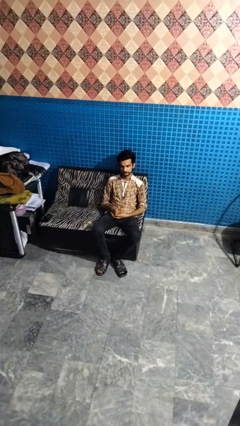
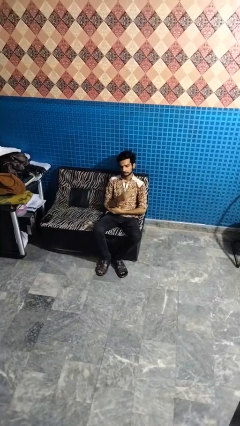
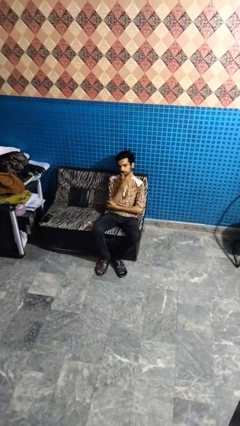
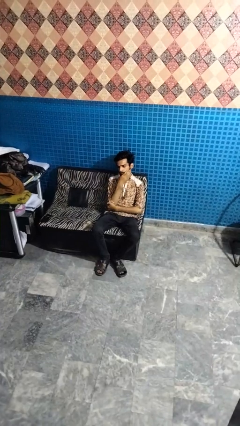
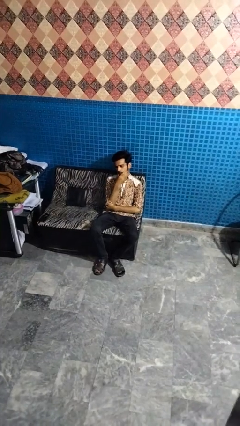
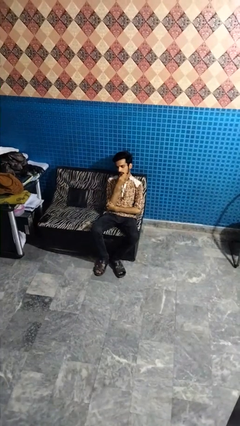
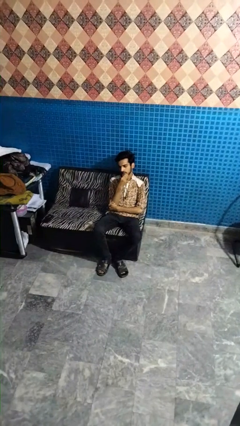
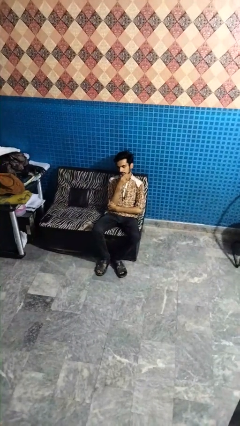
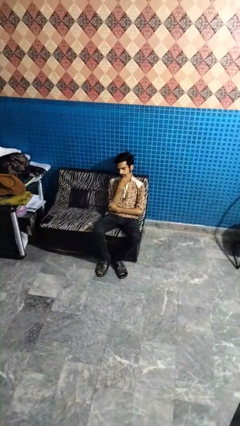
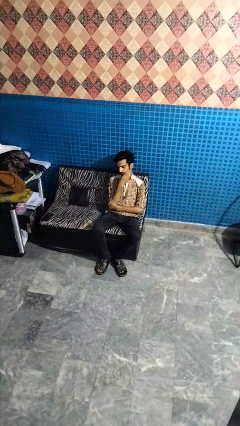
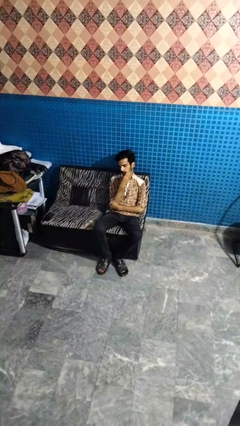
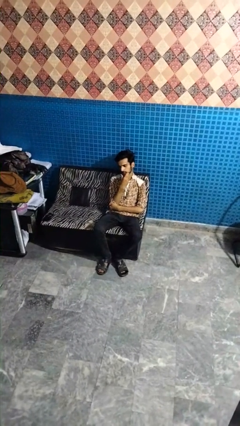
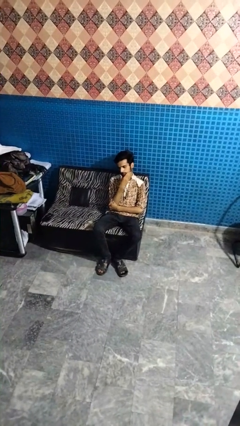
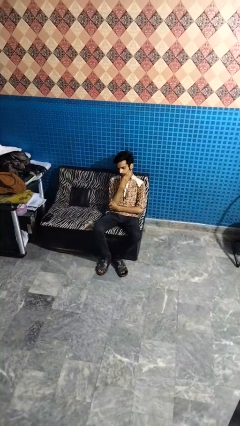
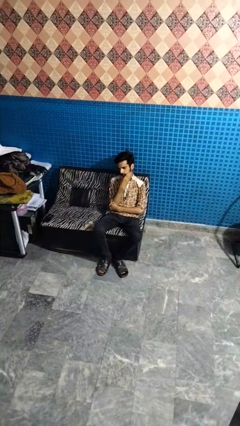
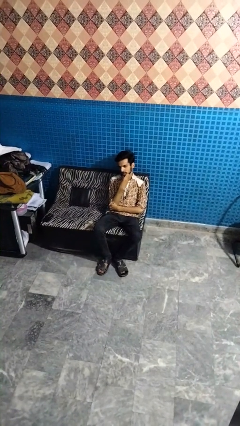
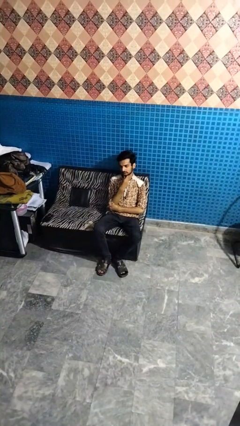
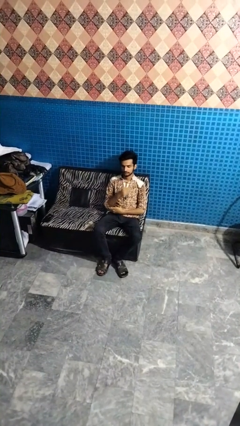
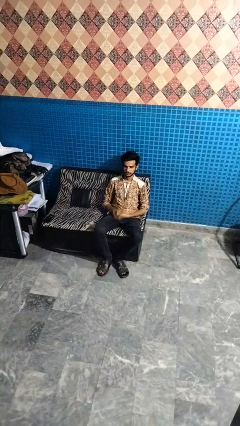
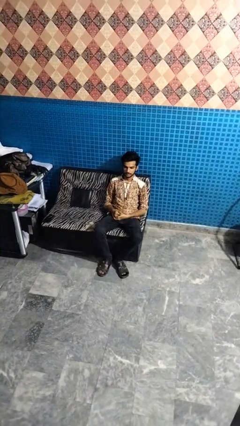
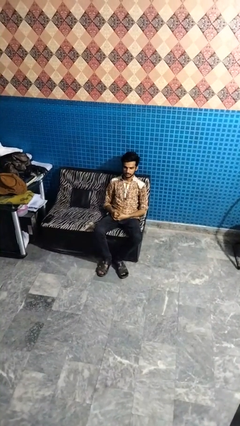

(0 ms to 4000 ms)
person strokes chin

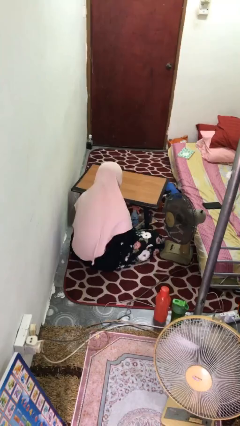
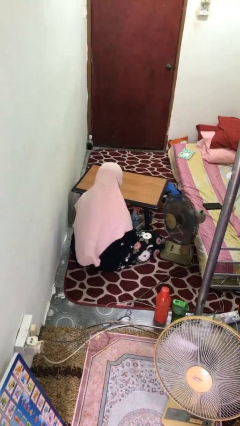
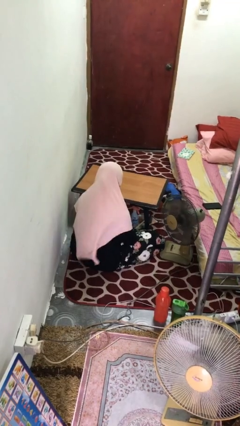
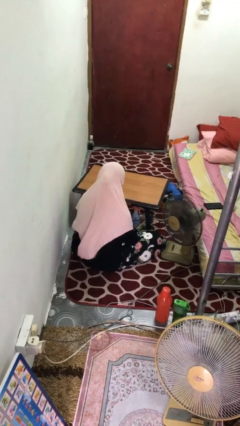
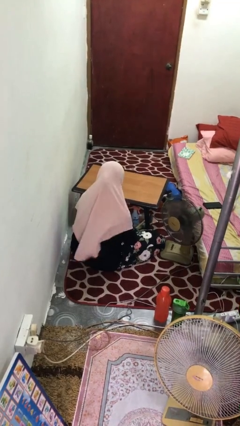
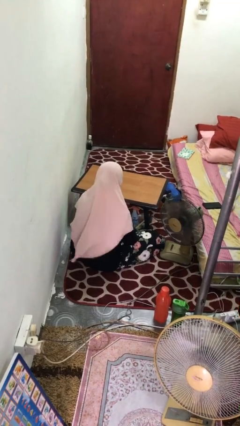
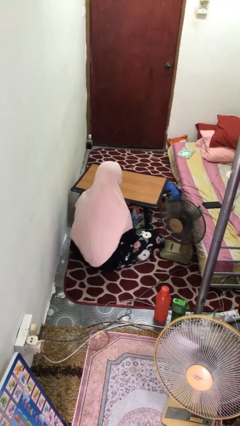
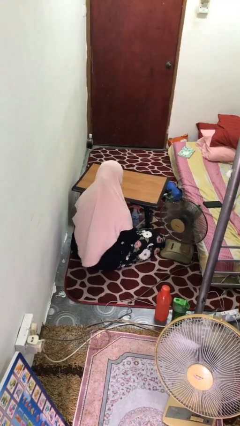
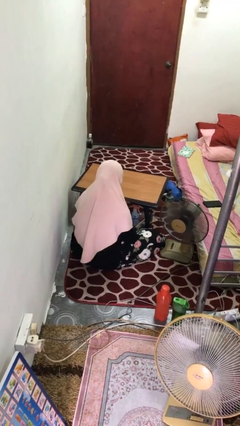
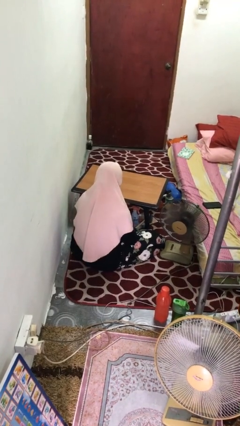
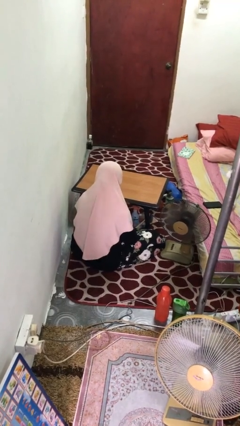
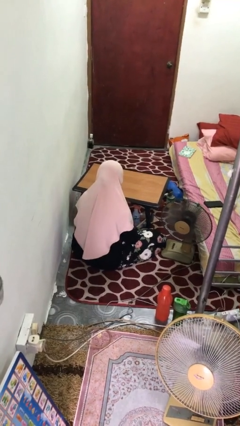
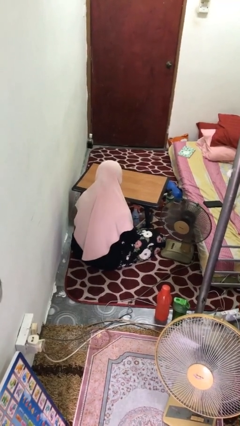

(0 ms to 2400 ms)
person nods head

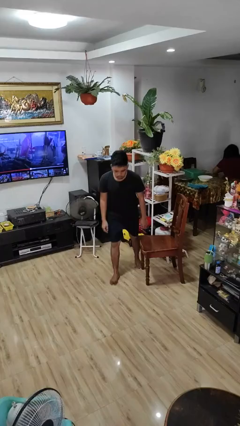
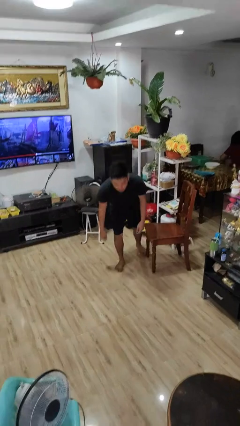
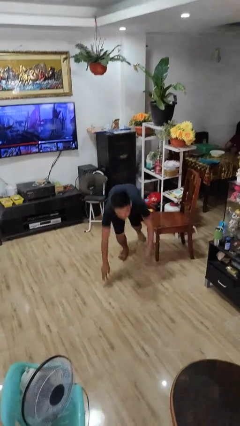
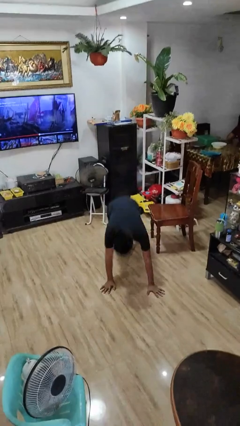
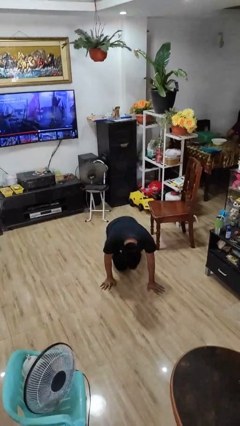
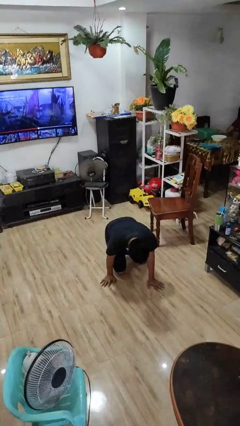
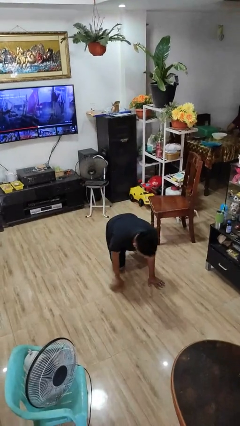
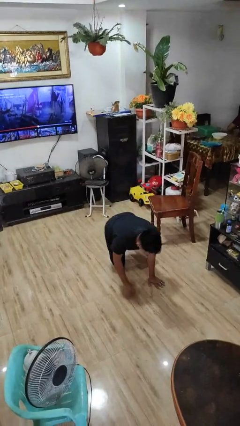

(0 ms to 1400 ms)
person trips on object on floor

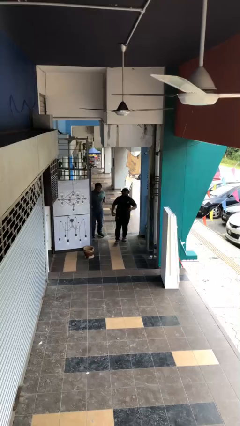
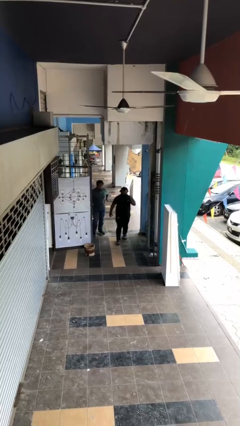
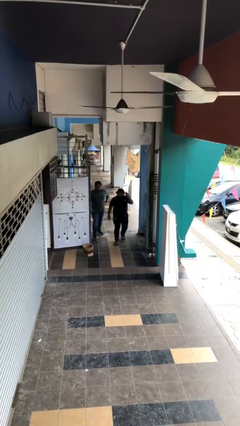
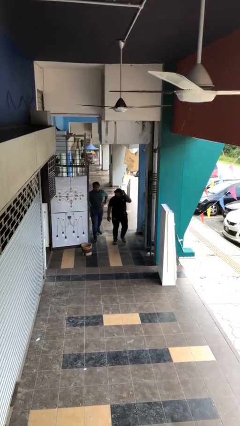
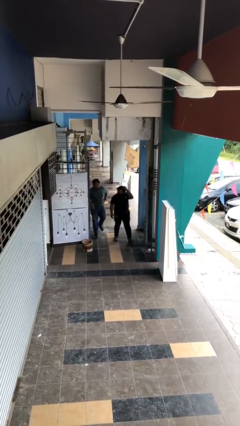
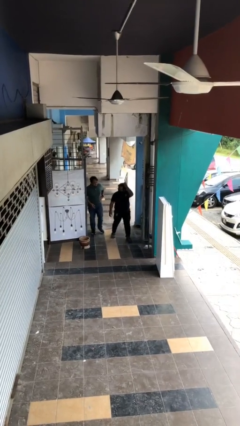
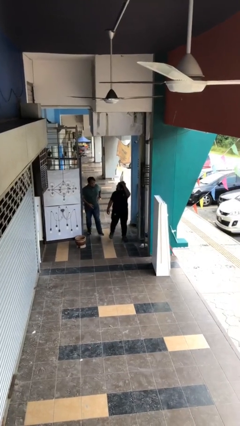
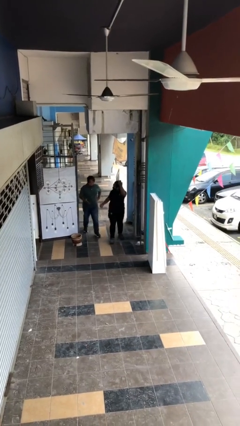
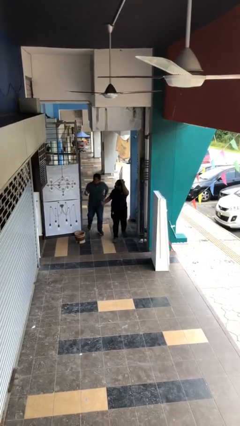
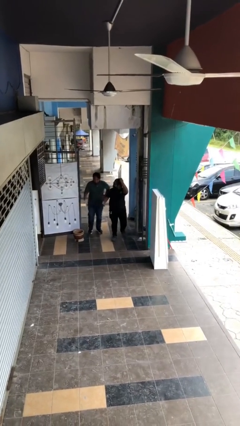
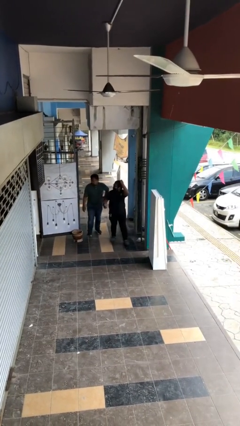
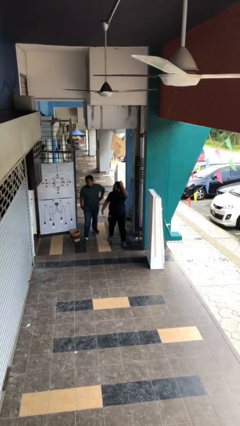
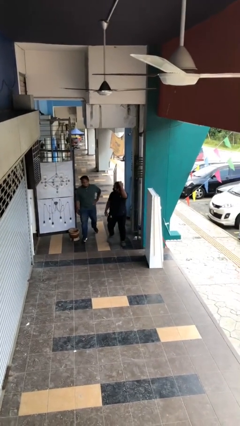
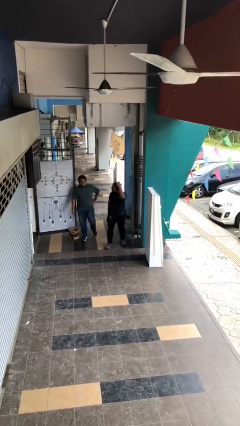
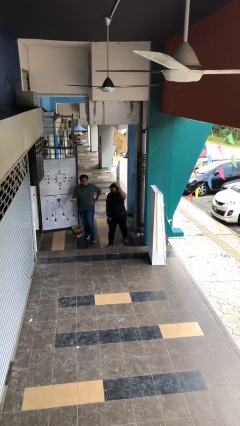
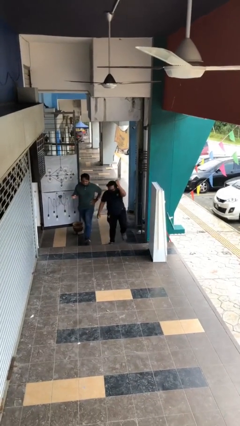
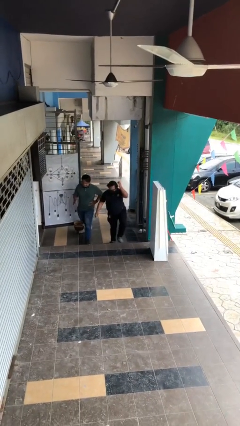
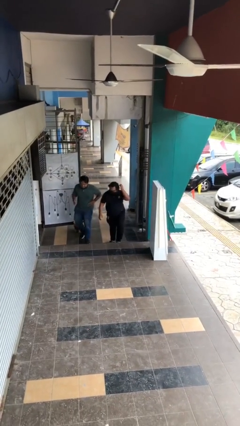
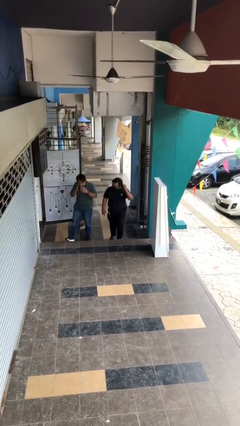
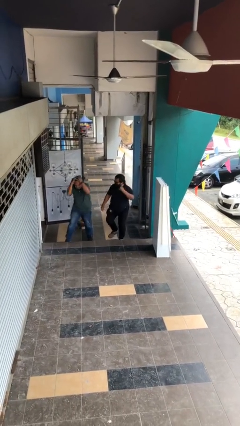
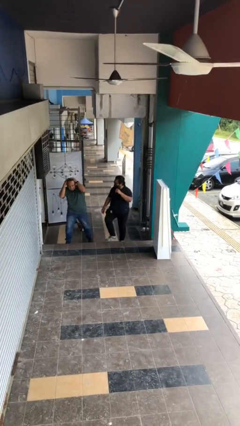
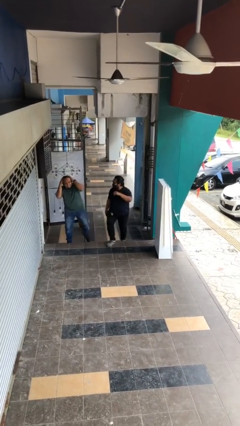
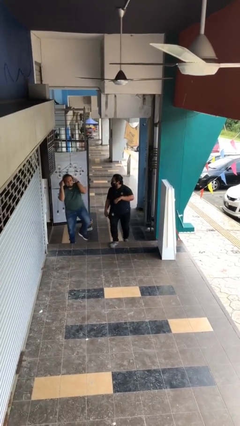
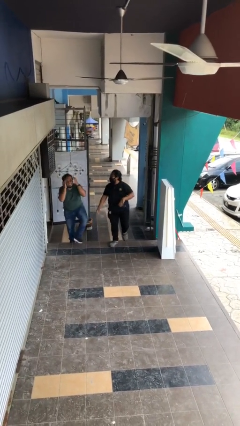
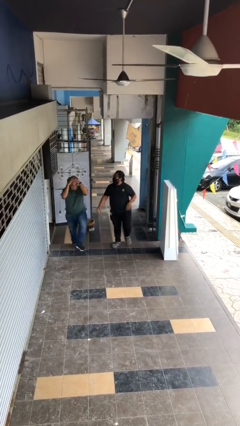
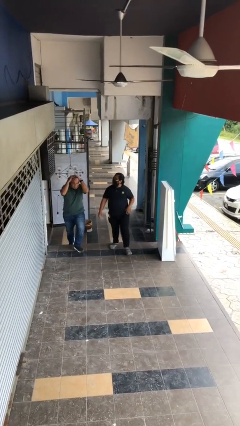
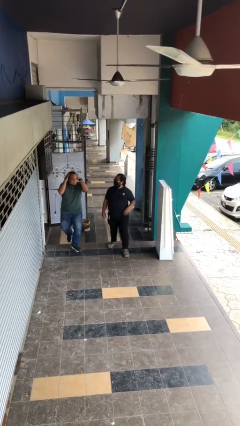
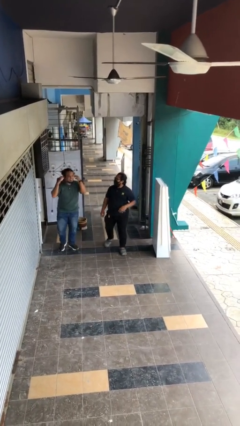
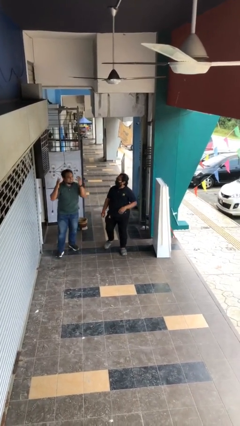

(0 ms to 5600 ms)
person talks to person

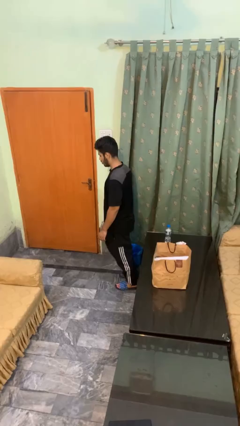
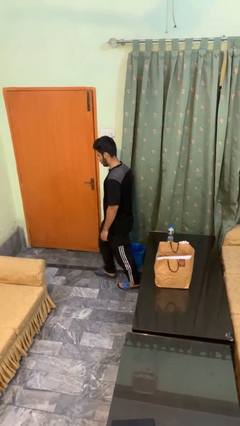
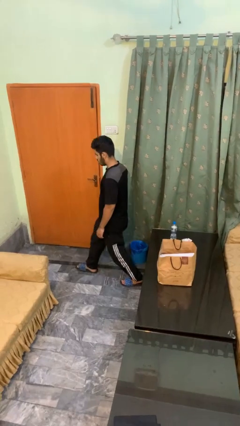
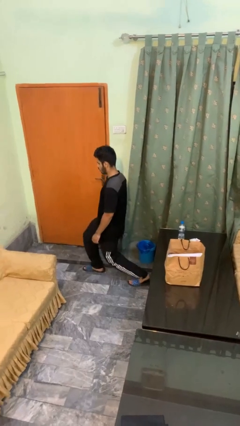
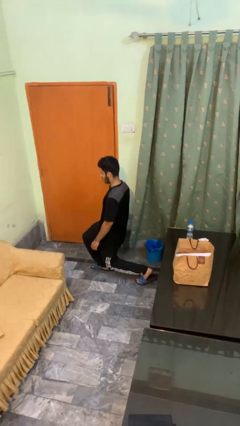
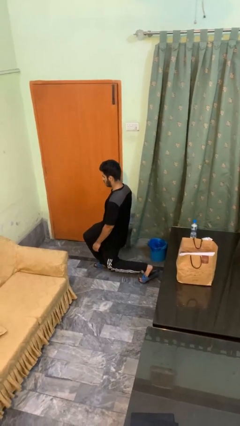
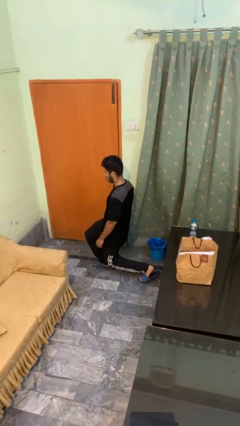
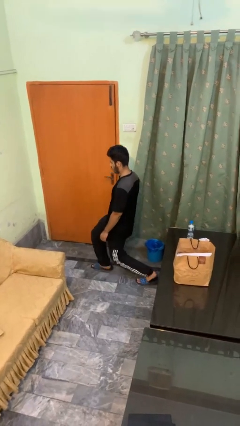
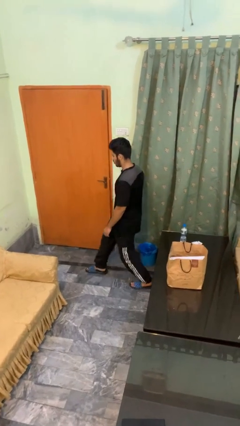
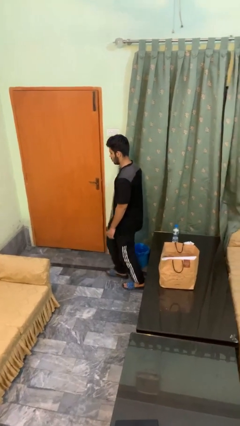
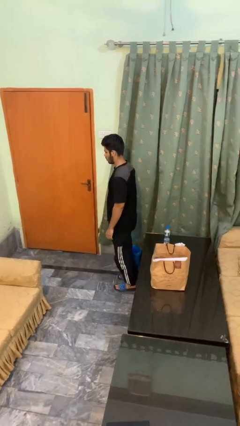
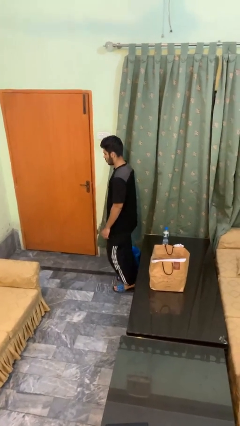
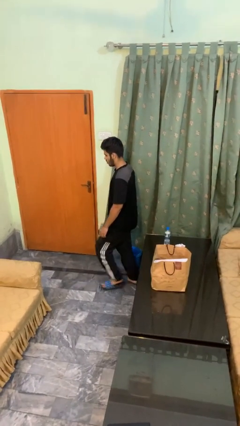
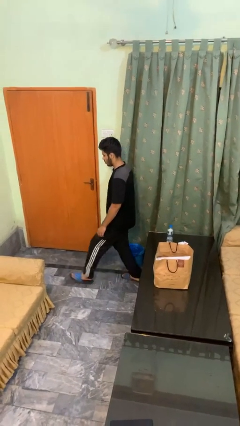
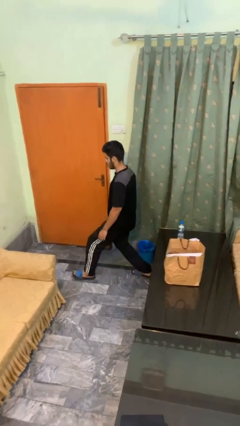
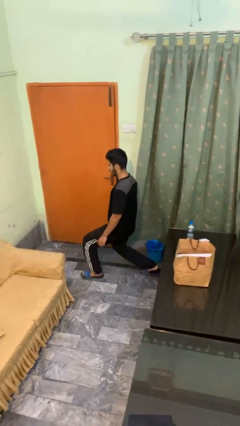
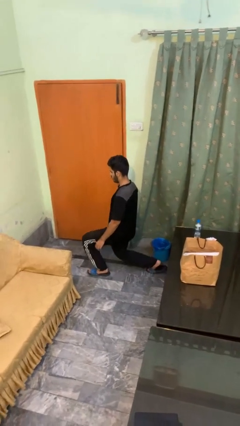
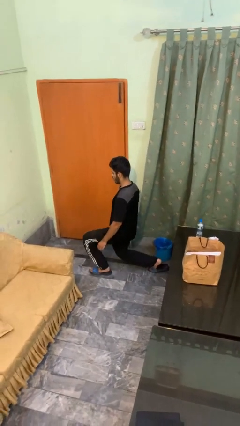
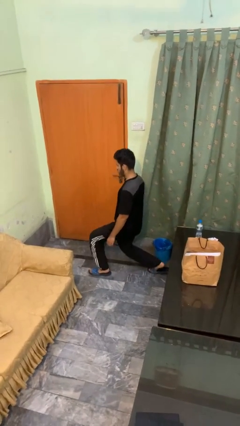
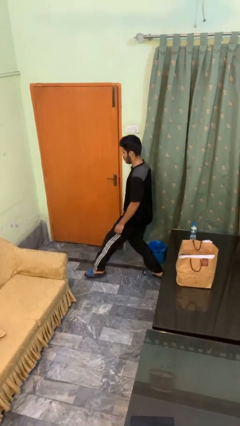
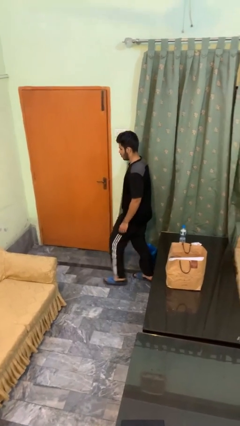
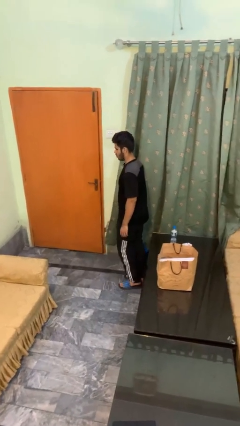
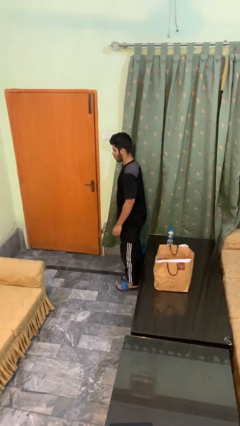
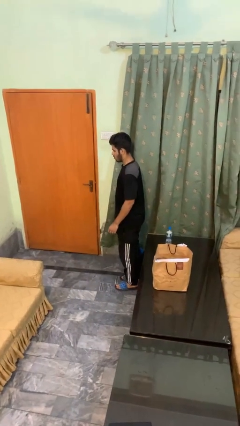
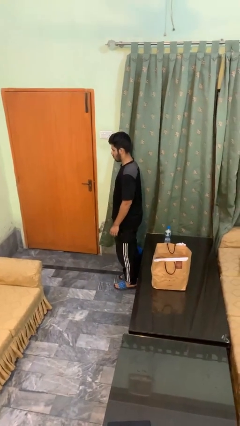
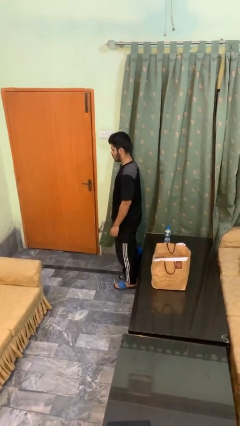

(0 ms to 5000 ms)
person exercises with lunges
